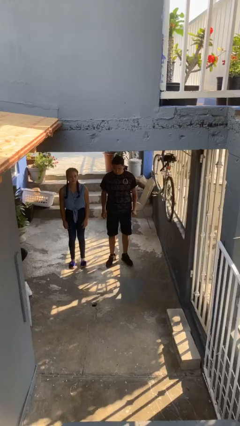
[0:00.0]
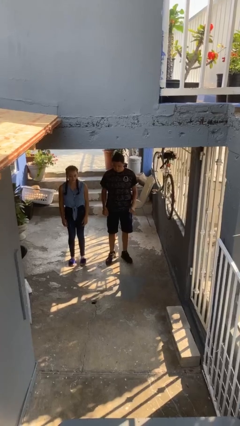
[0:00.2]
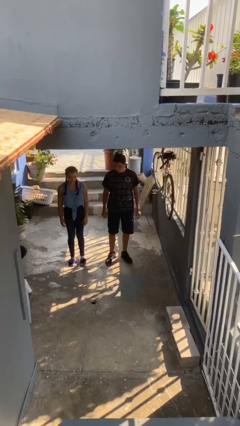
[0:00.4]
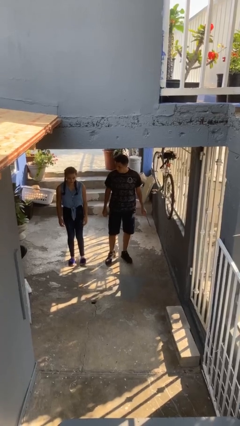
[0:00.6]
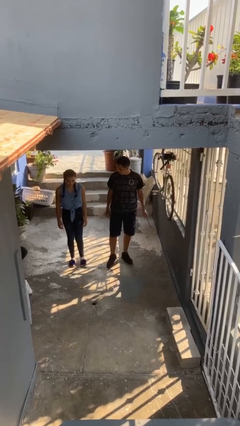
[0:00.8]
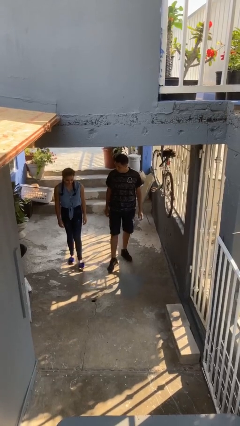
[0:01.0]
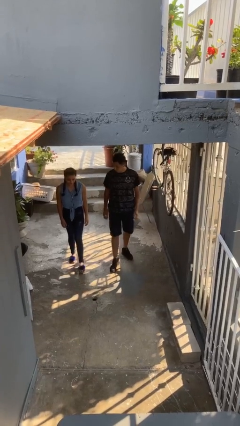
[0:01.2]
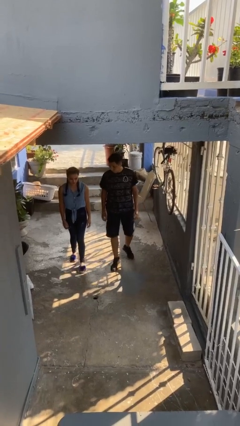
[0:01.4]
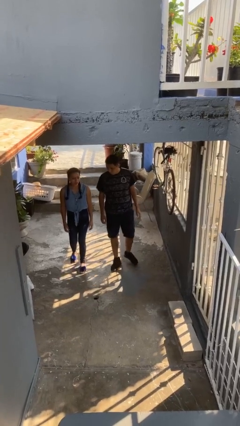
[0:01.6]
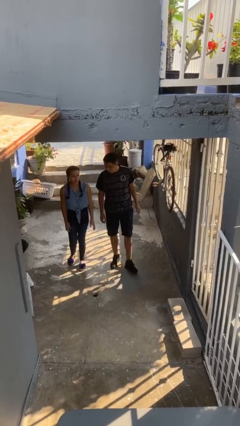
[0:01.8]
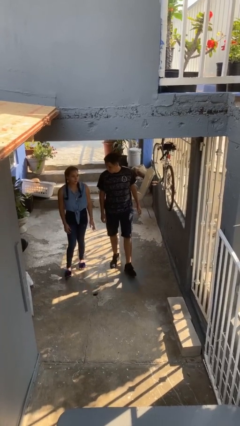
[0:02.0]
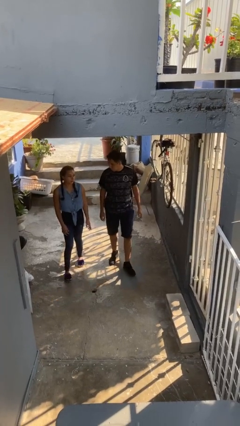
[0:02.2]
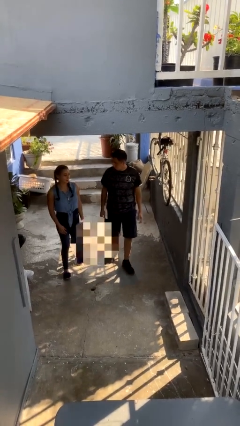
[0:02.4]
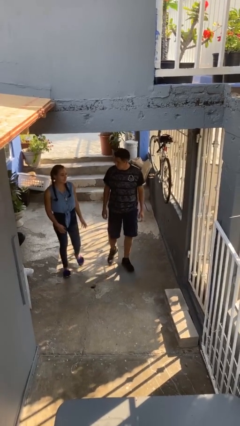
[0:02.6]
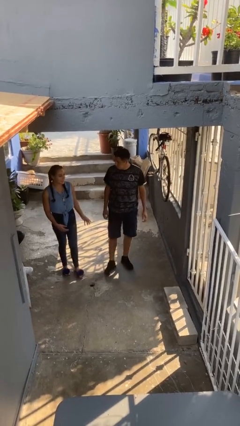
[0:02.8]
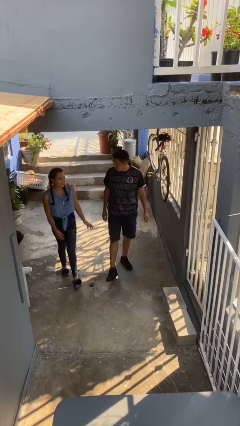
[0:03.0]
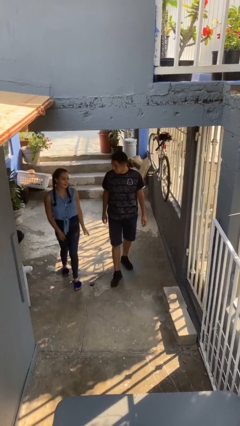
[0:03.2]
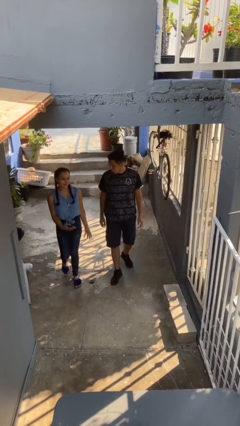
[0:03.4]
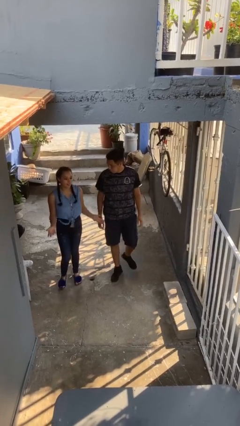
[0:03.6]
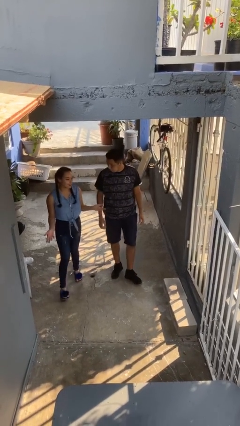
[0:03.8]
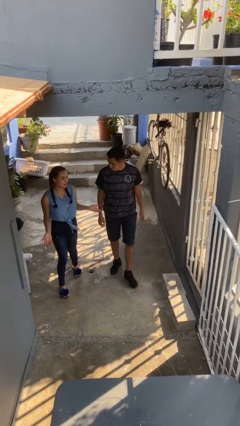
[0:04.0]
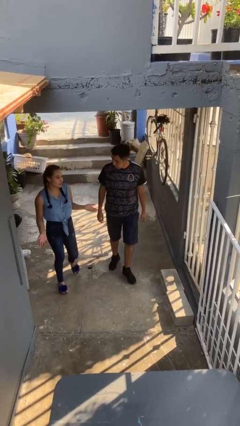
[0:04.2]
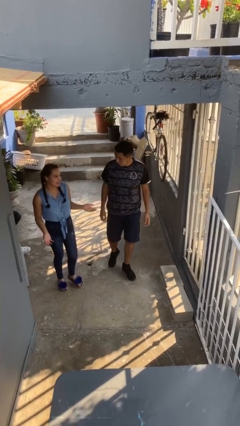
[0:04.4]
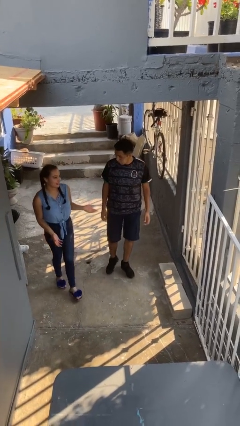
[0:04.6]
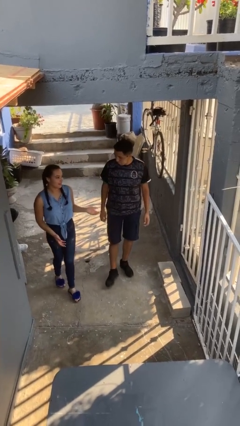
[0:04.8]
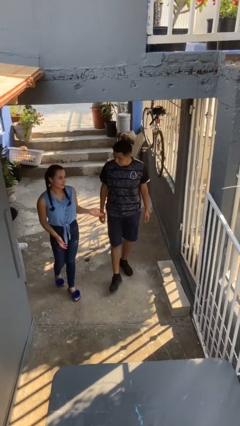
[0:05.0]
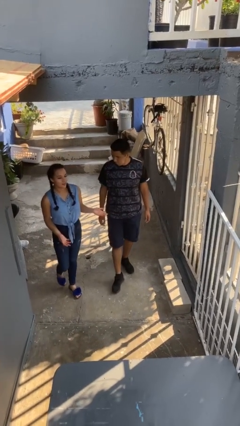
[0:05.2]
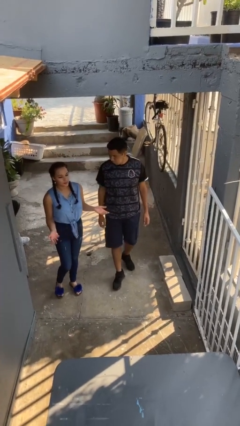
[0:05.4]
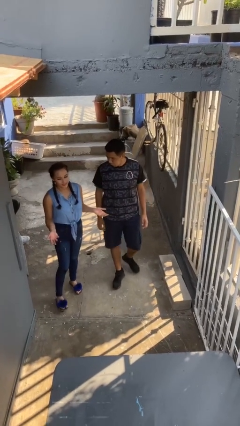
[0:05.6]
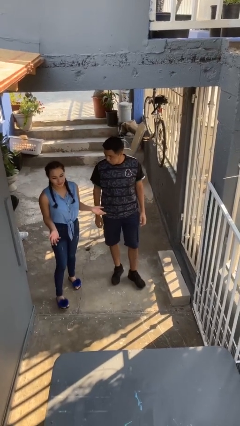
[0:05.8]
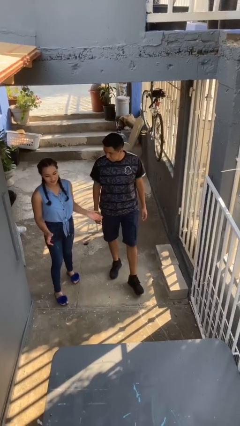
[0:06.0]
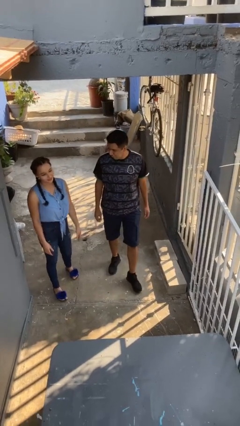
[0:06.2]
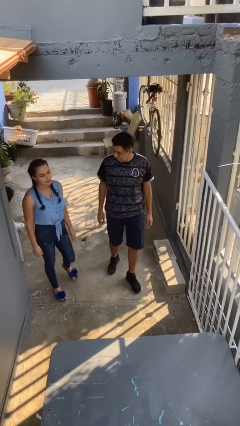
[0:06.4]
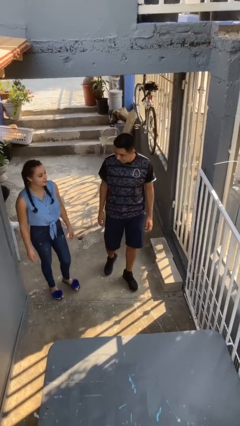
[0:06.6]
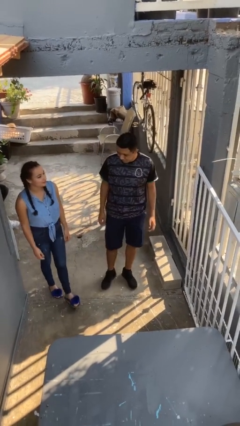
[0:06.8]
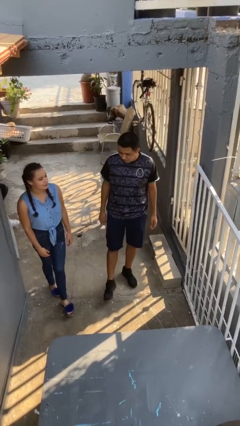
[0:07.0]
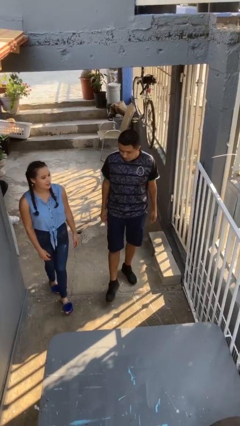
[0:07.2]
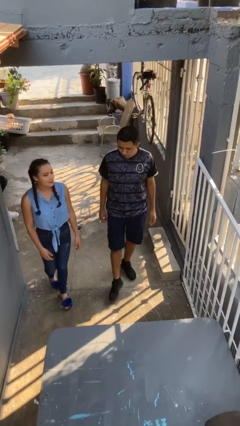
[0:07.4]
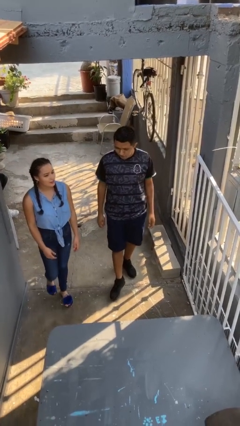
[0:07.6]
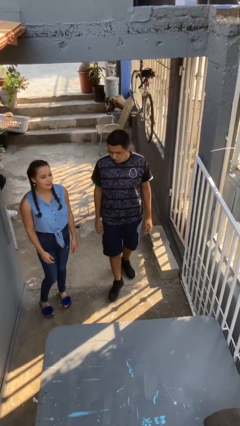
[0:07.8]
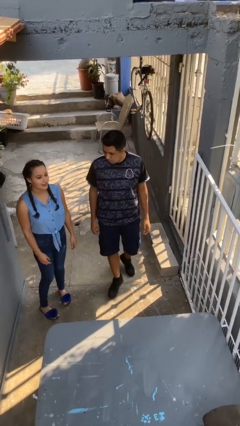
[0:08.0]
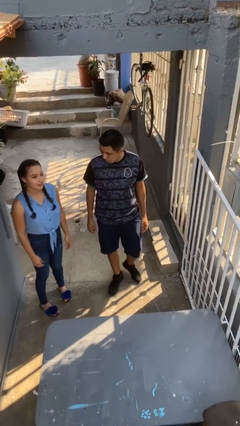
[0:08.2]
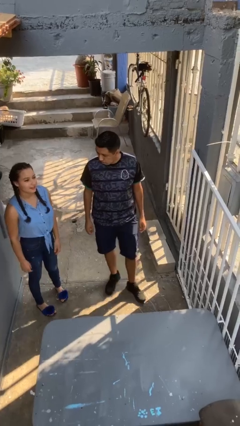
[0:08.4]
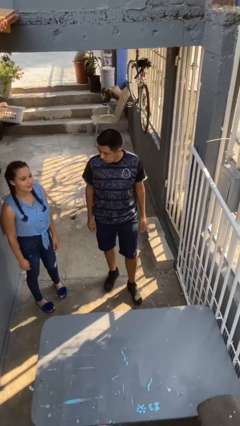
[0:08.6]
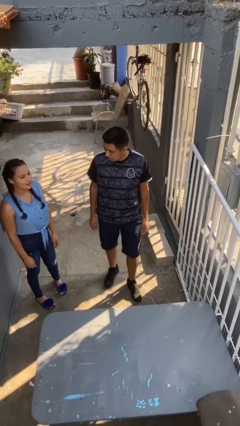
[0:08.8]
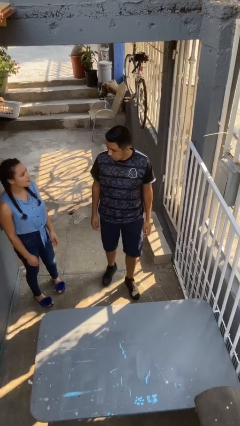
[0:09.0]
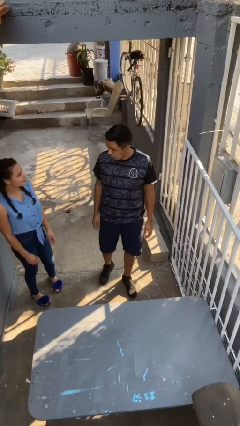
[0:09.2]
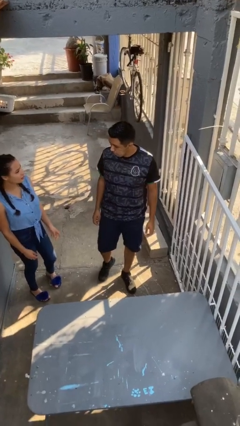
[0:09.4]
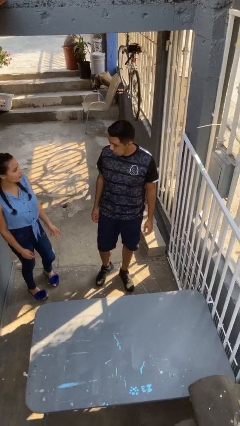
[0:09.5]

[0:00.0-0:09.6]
person talks to person

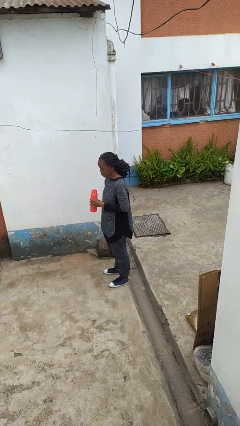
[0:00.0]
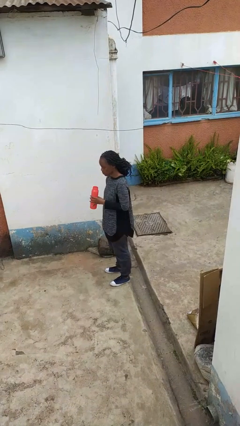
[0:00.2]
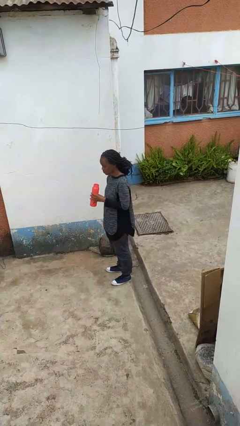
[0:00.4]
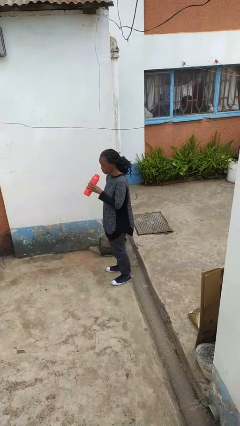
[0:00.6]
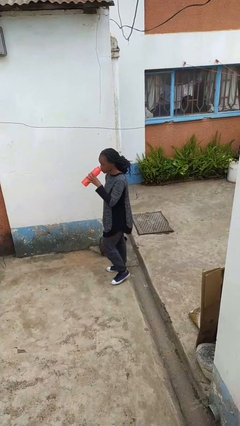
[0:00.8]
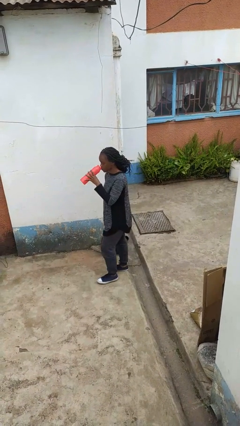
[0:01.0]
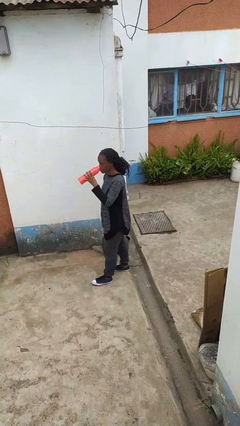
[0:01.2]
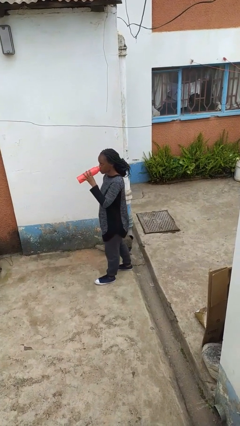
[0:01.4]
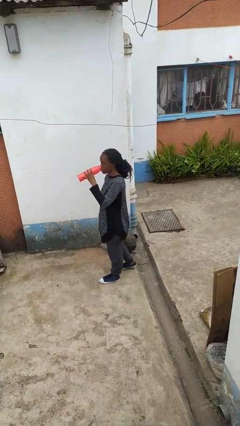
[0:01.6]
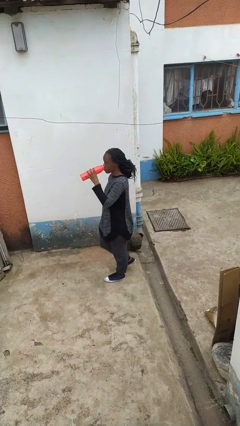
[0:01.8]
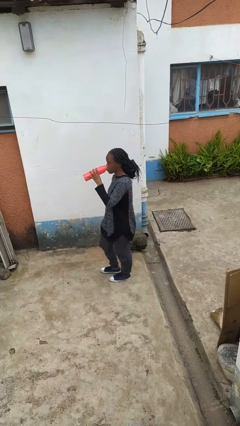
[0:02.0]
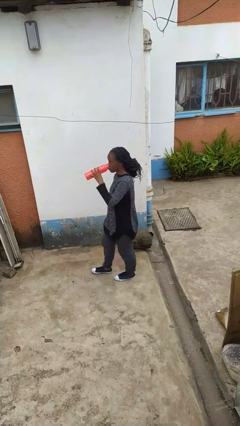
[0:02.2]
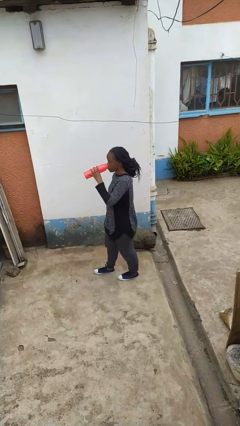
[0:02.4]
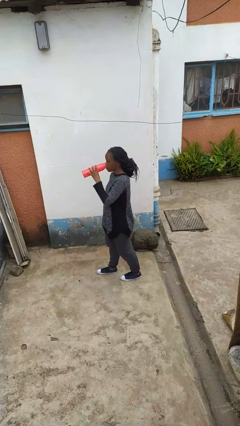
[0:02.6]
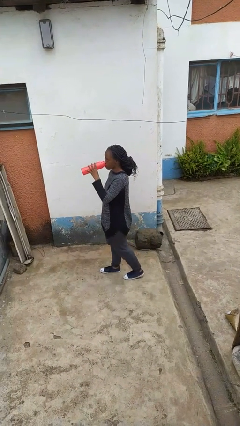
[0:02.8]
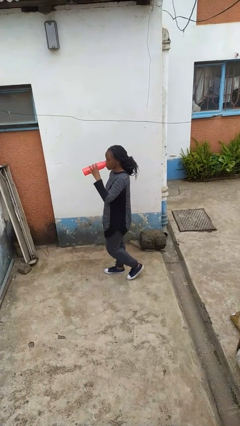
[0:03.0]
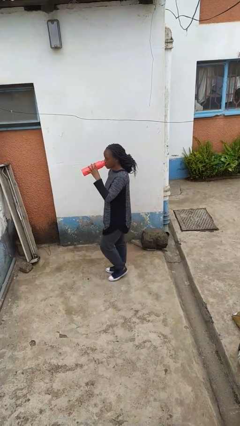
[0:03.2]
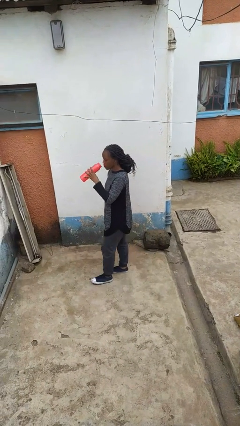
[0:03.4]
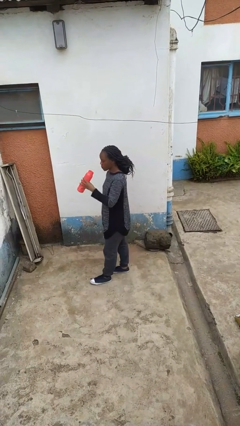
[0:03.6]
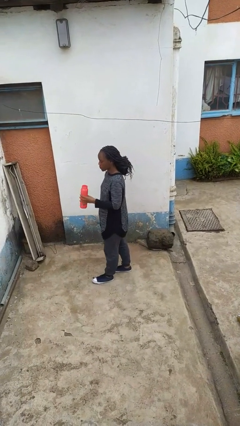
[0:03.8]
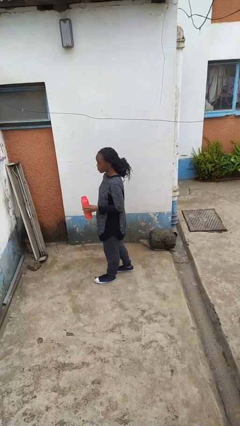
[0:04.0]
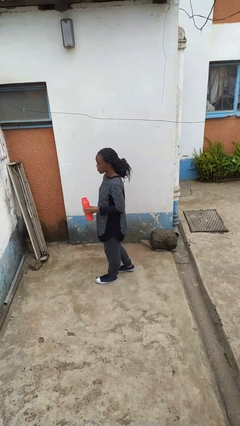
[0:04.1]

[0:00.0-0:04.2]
person drinks from bottle

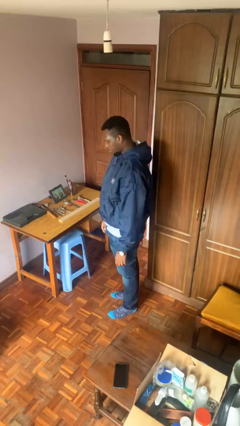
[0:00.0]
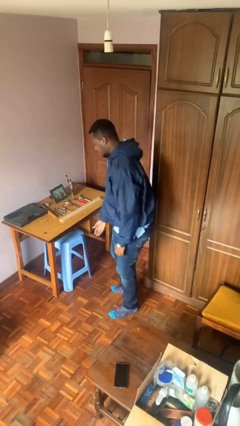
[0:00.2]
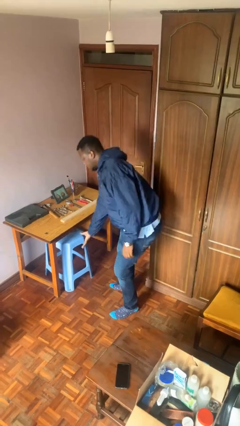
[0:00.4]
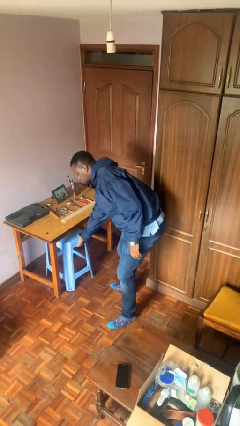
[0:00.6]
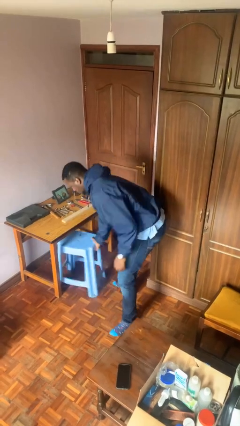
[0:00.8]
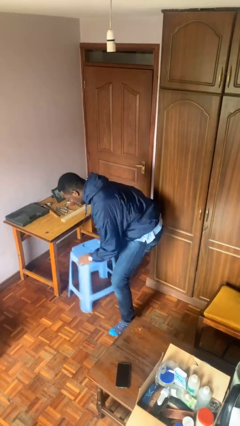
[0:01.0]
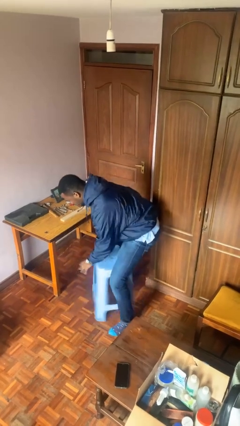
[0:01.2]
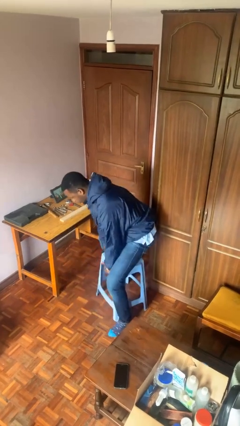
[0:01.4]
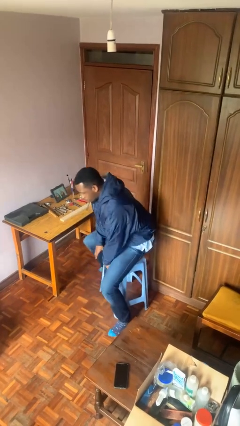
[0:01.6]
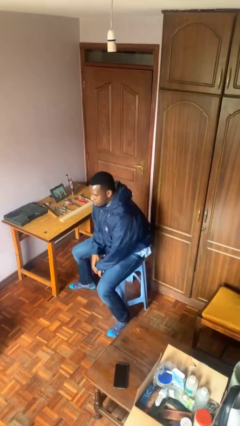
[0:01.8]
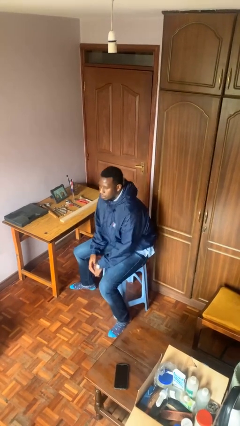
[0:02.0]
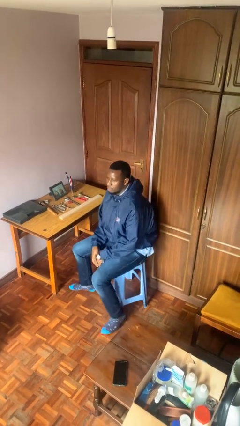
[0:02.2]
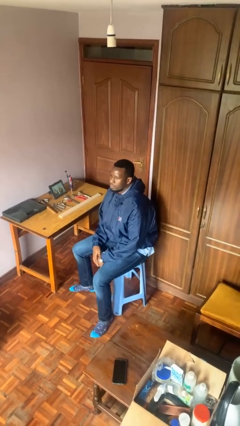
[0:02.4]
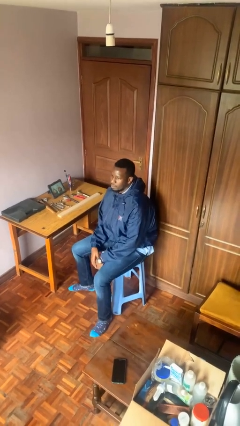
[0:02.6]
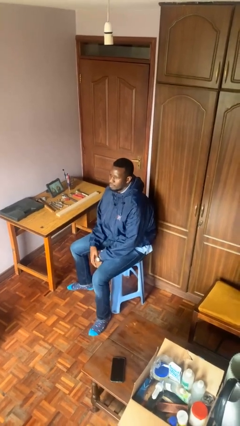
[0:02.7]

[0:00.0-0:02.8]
person sits down

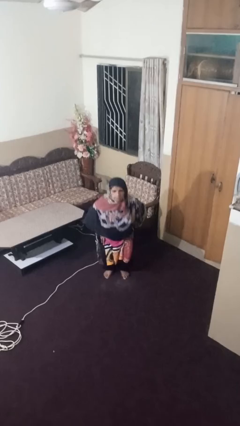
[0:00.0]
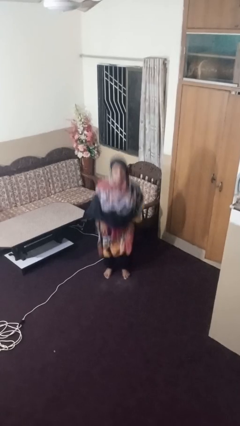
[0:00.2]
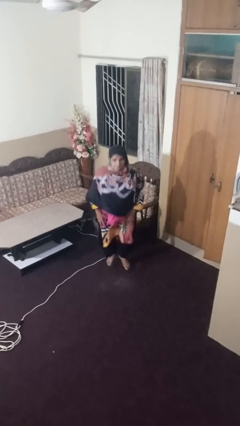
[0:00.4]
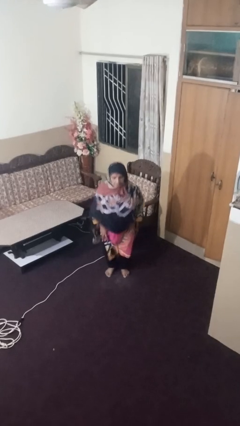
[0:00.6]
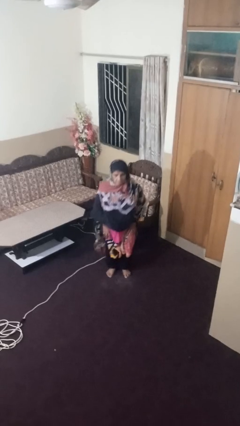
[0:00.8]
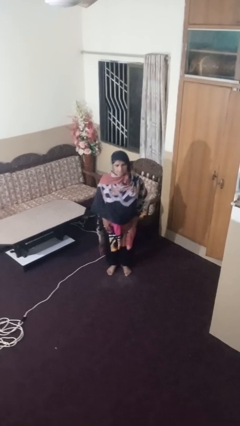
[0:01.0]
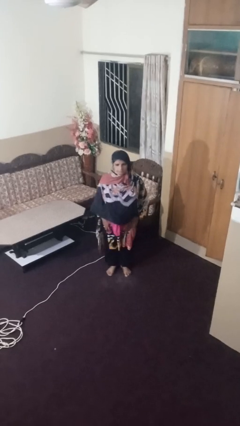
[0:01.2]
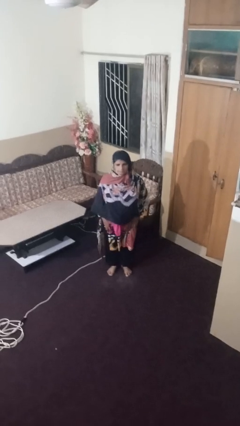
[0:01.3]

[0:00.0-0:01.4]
person jumps

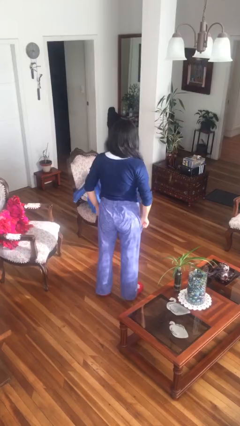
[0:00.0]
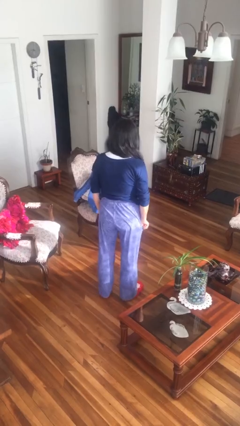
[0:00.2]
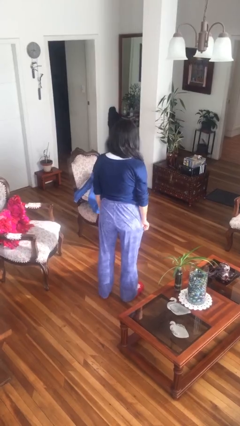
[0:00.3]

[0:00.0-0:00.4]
person hikes up pants
